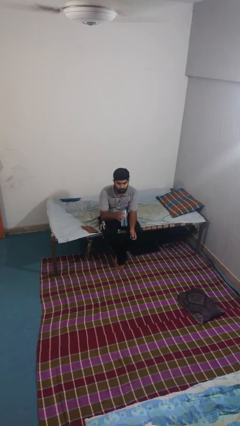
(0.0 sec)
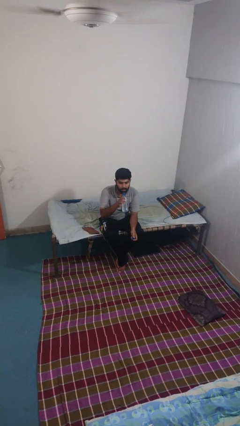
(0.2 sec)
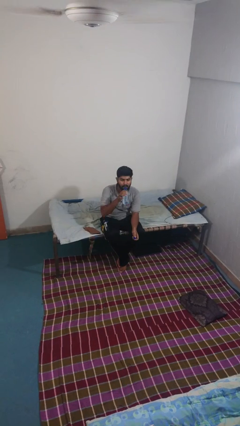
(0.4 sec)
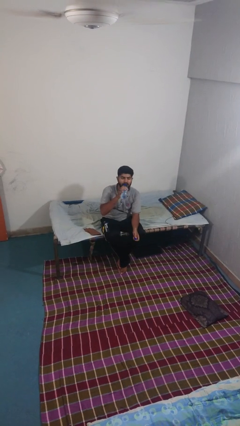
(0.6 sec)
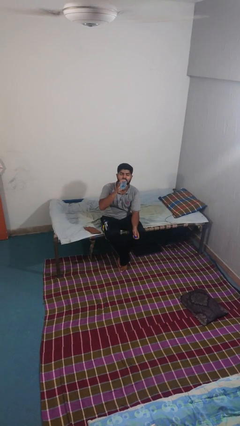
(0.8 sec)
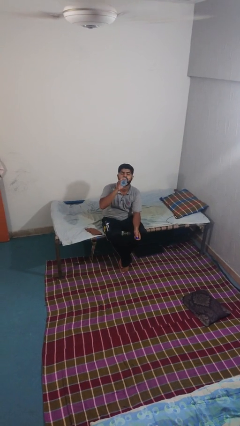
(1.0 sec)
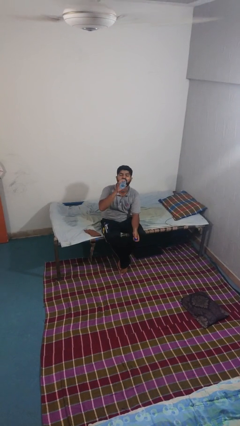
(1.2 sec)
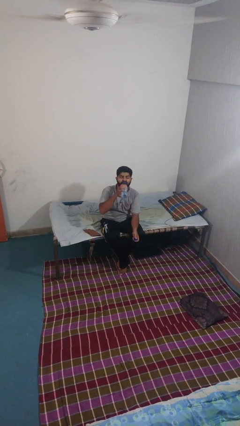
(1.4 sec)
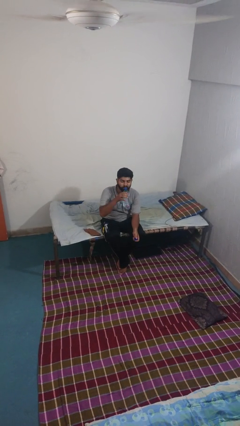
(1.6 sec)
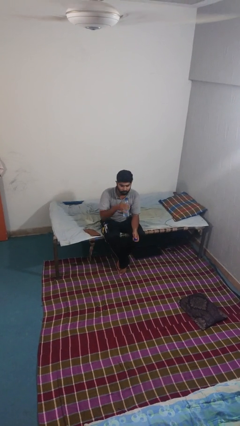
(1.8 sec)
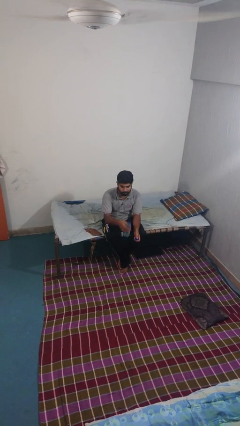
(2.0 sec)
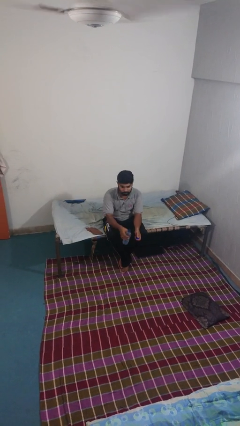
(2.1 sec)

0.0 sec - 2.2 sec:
person drinks from bottle

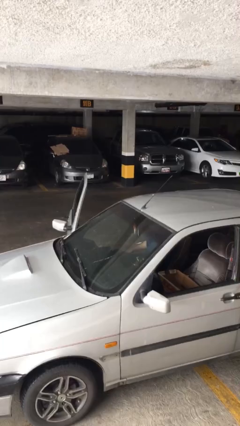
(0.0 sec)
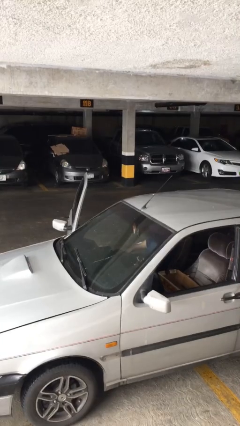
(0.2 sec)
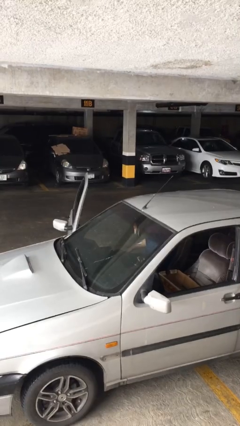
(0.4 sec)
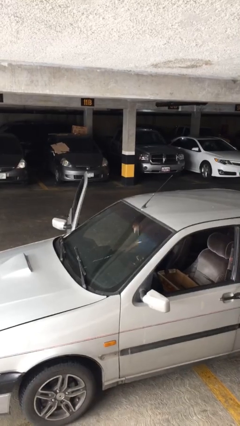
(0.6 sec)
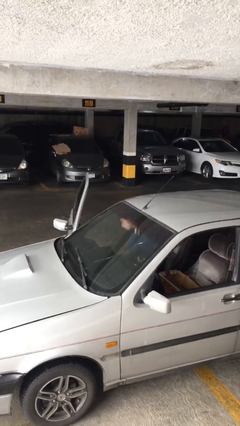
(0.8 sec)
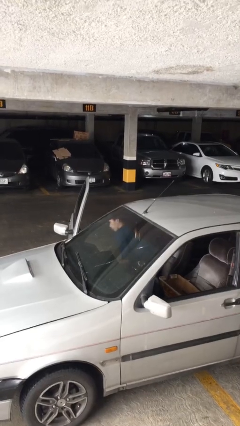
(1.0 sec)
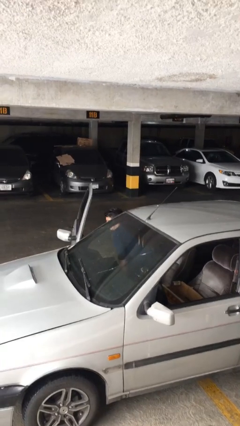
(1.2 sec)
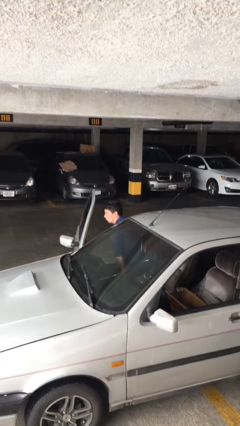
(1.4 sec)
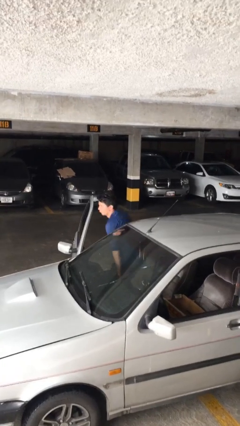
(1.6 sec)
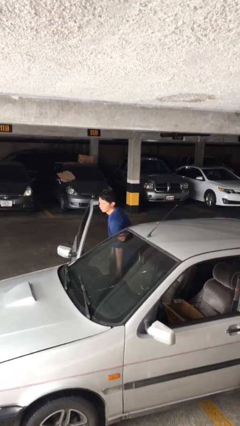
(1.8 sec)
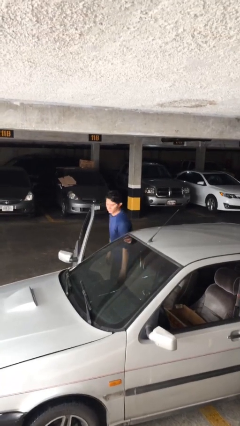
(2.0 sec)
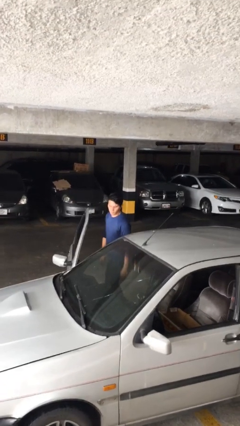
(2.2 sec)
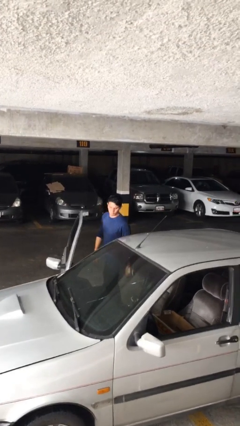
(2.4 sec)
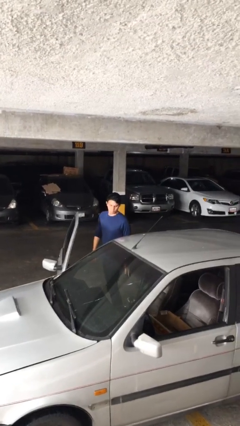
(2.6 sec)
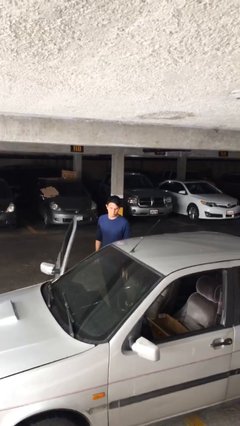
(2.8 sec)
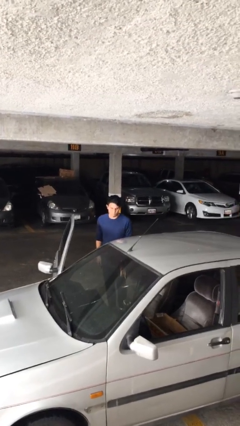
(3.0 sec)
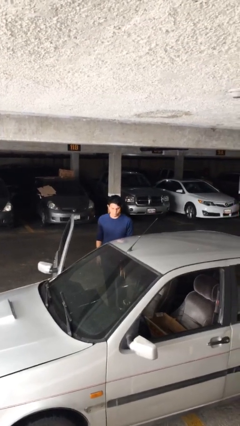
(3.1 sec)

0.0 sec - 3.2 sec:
person exits car

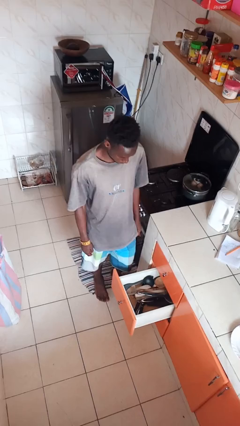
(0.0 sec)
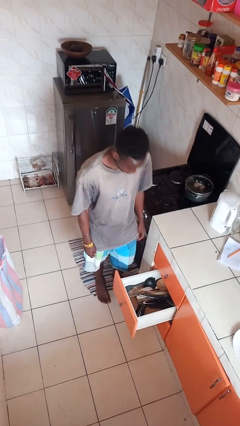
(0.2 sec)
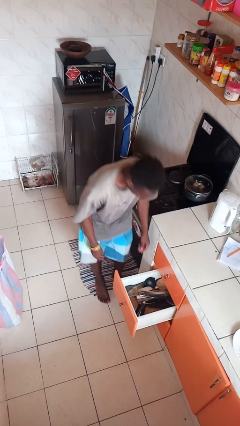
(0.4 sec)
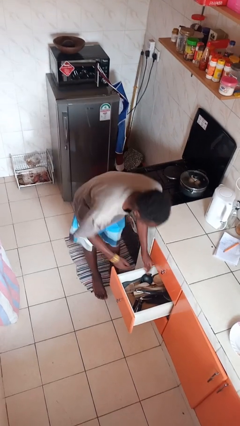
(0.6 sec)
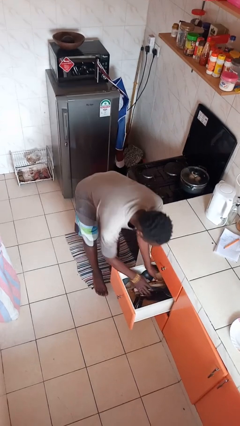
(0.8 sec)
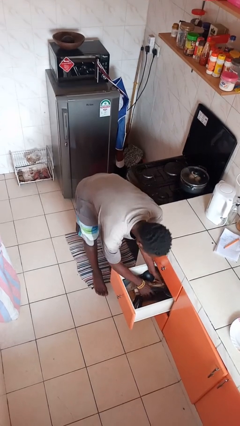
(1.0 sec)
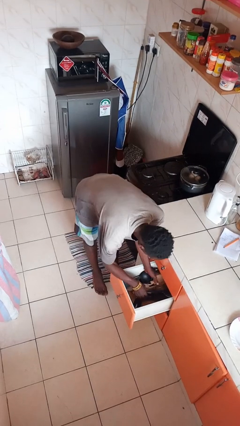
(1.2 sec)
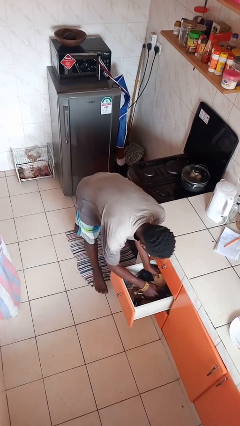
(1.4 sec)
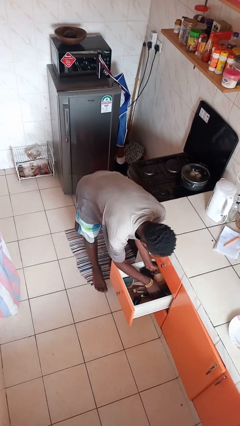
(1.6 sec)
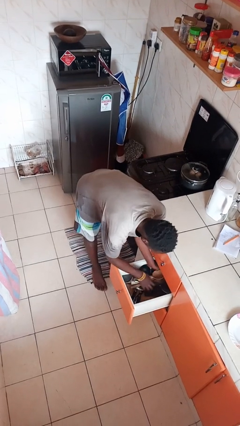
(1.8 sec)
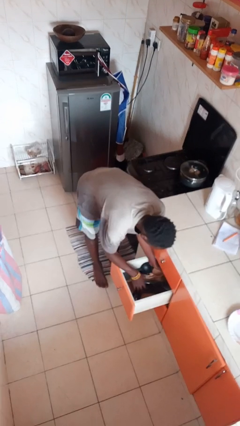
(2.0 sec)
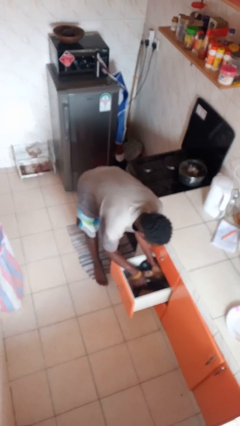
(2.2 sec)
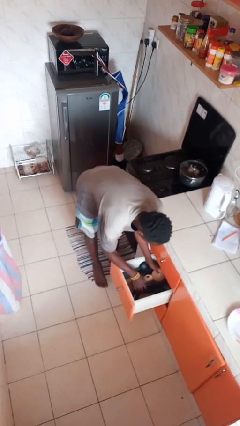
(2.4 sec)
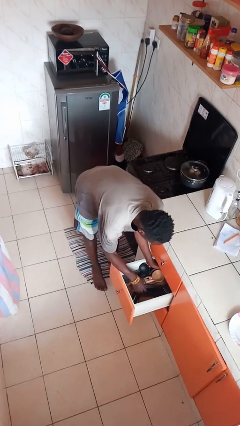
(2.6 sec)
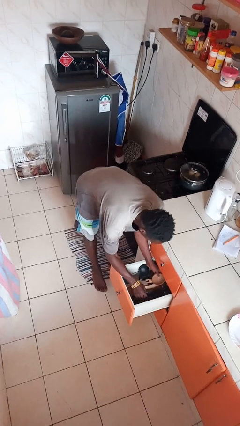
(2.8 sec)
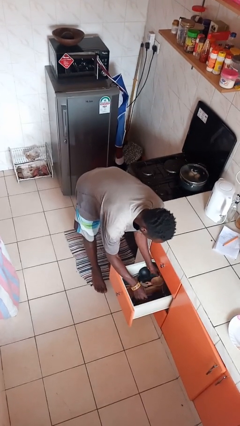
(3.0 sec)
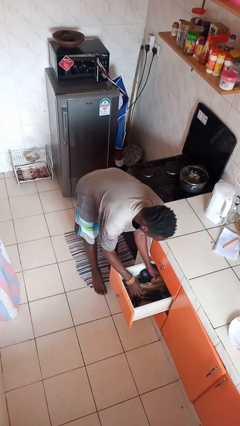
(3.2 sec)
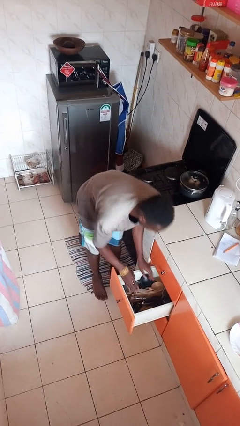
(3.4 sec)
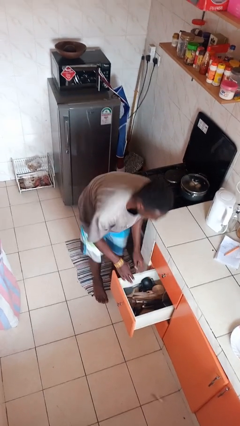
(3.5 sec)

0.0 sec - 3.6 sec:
person searches in kitchen drawer

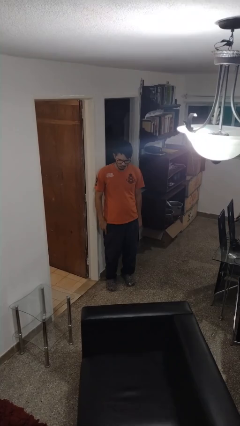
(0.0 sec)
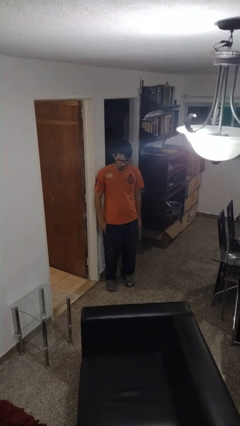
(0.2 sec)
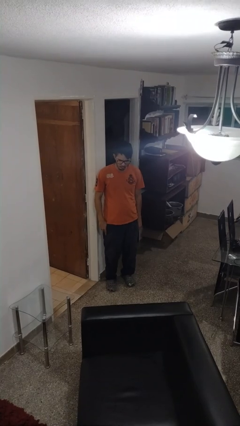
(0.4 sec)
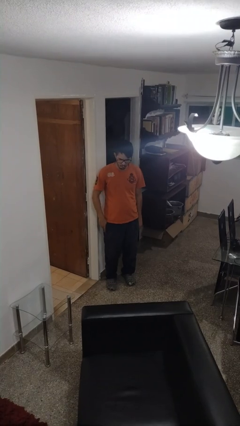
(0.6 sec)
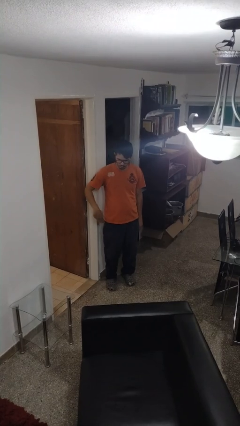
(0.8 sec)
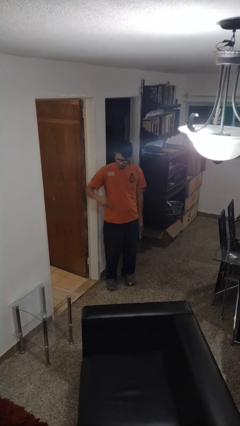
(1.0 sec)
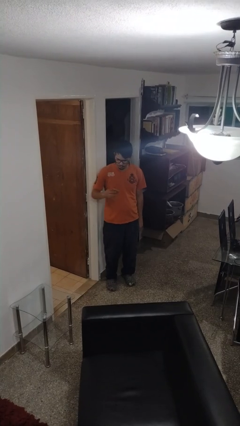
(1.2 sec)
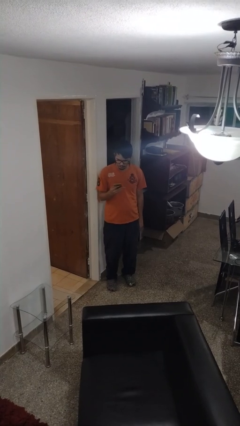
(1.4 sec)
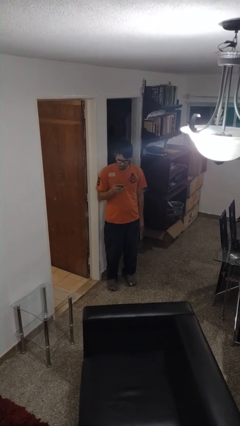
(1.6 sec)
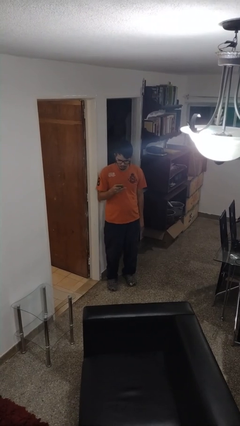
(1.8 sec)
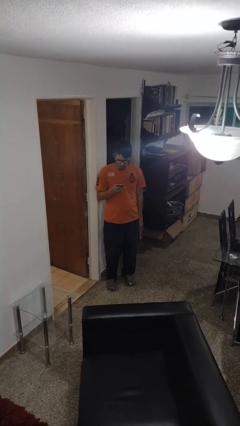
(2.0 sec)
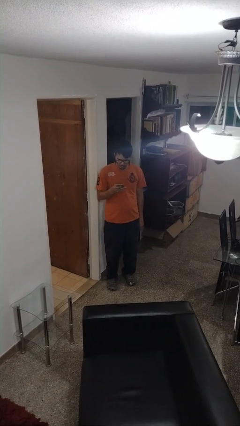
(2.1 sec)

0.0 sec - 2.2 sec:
person takes phone from pocket

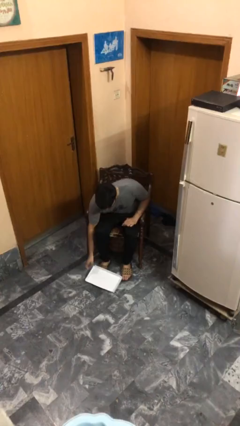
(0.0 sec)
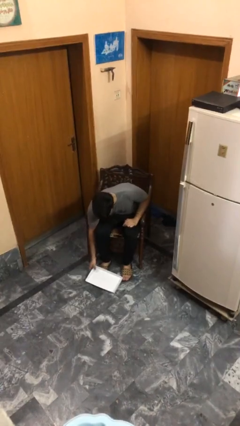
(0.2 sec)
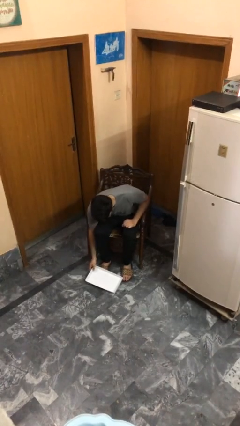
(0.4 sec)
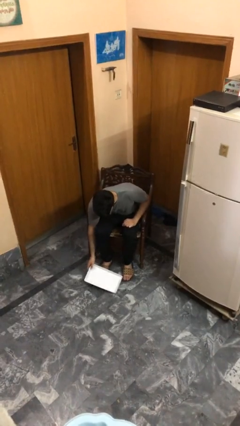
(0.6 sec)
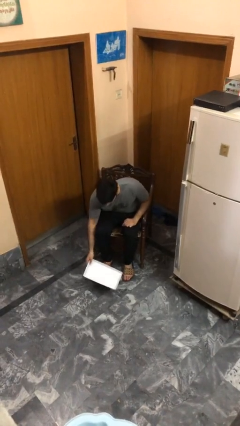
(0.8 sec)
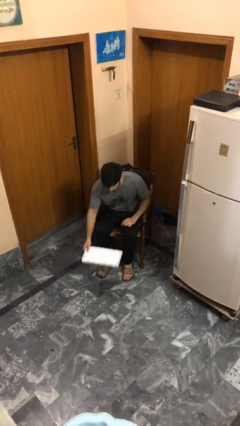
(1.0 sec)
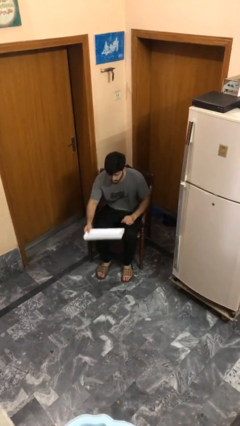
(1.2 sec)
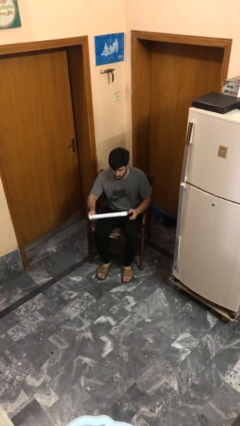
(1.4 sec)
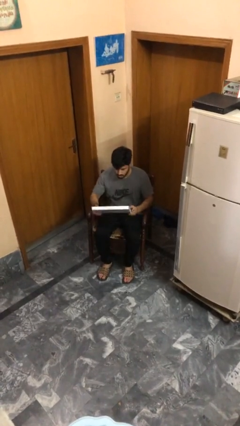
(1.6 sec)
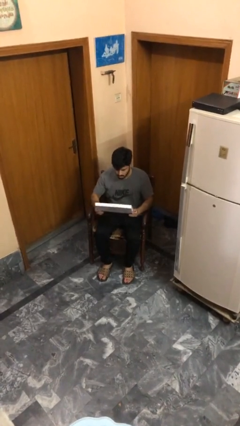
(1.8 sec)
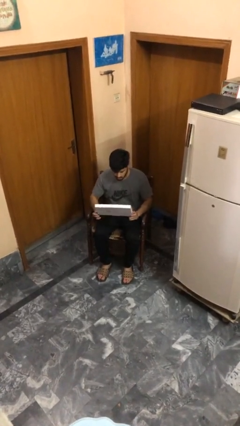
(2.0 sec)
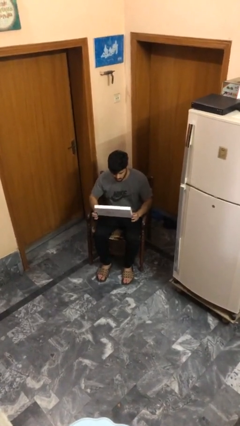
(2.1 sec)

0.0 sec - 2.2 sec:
person picks up object from floor

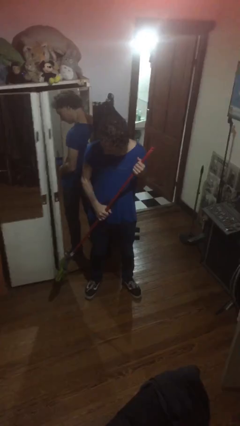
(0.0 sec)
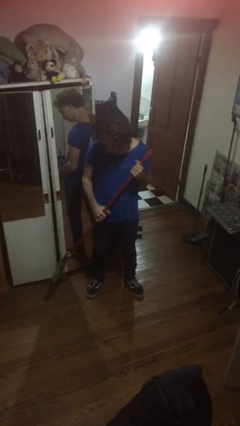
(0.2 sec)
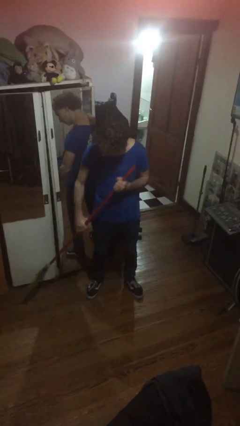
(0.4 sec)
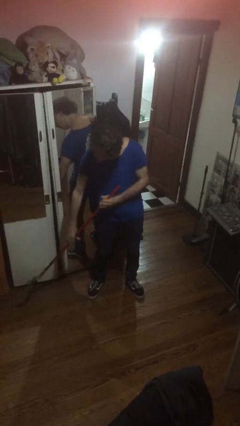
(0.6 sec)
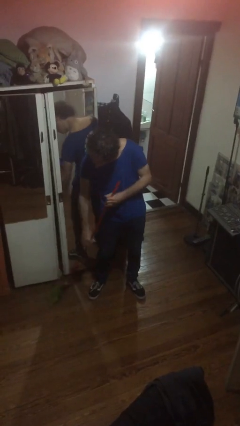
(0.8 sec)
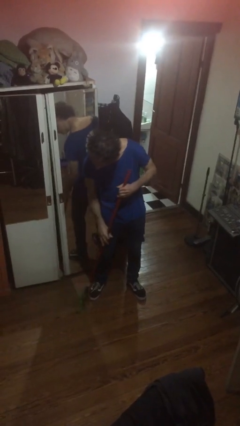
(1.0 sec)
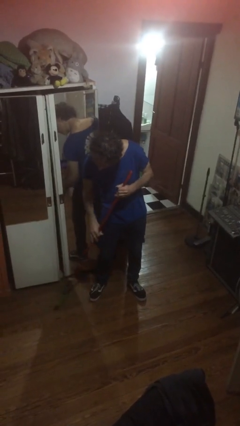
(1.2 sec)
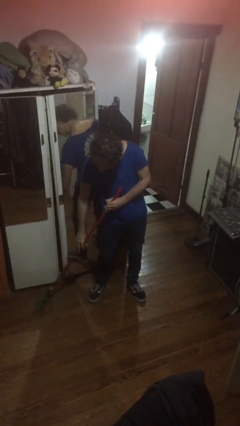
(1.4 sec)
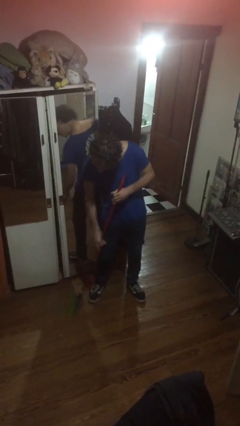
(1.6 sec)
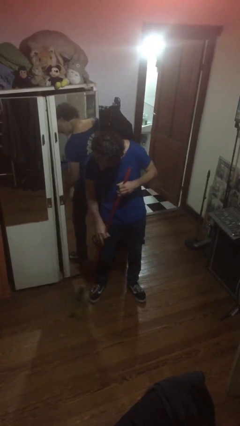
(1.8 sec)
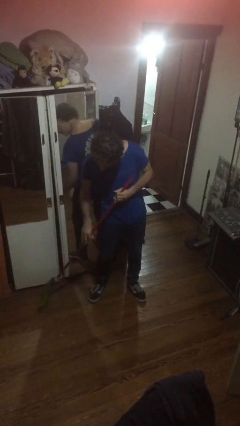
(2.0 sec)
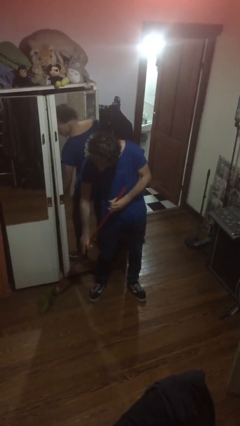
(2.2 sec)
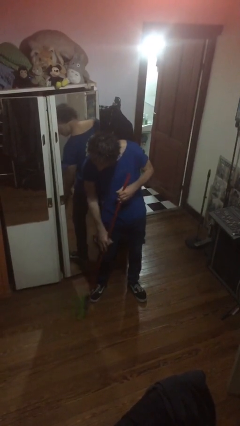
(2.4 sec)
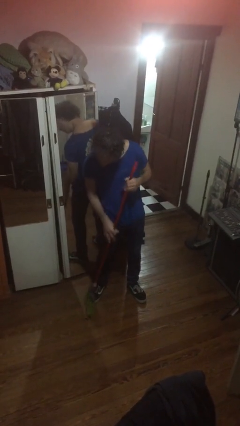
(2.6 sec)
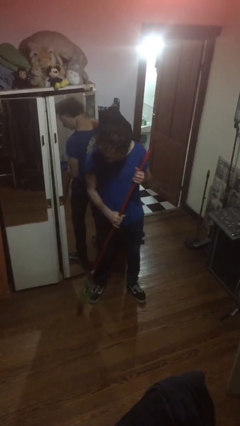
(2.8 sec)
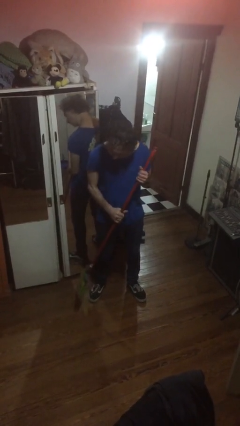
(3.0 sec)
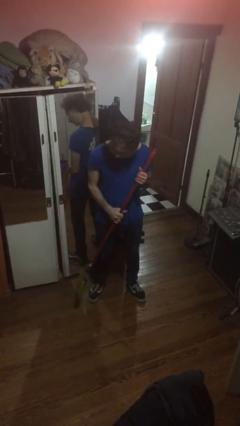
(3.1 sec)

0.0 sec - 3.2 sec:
person sweeps floor

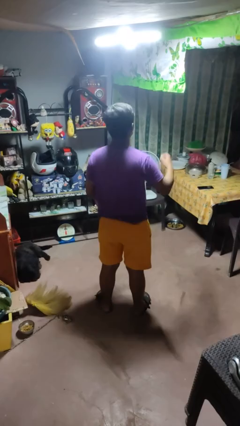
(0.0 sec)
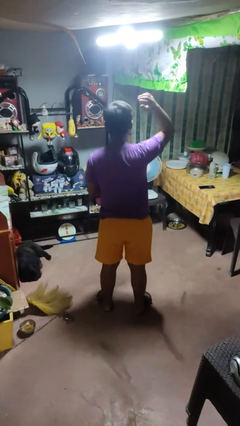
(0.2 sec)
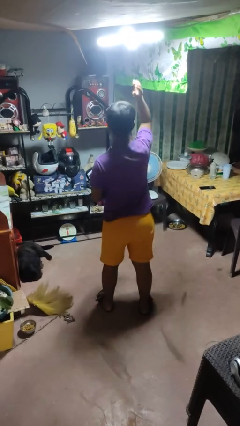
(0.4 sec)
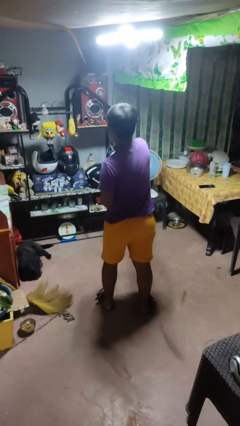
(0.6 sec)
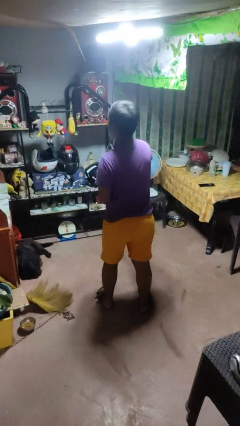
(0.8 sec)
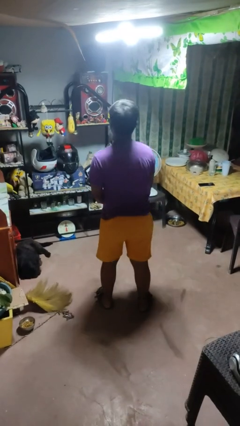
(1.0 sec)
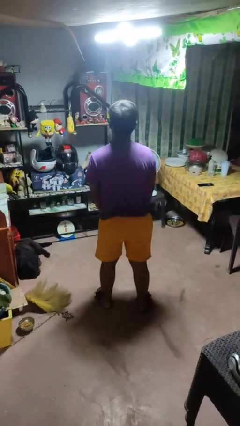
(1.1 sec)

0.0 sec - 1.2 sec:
person karate chop
